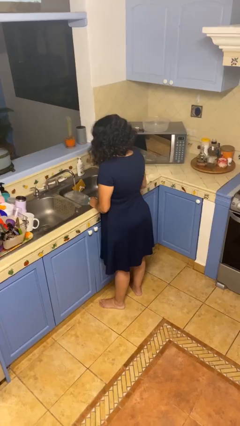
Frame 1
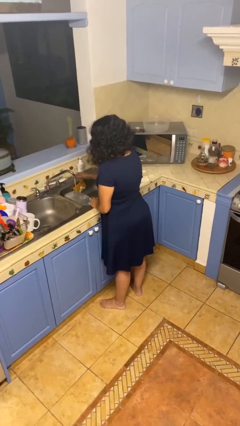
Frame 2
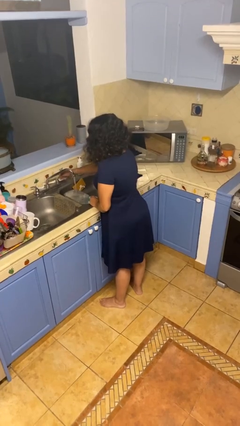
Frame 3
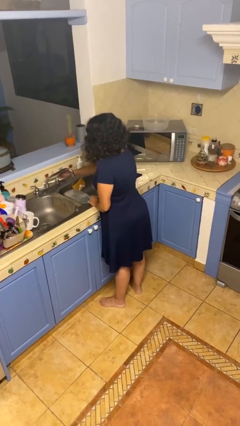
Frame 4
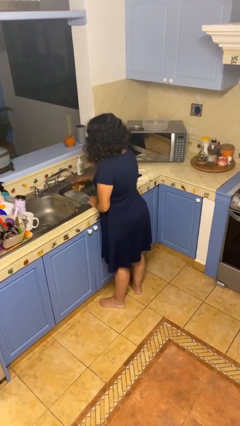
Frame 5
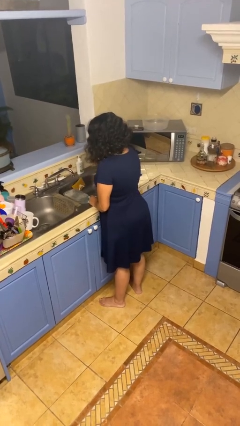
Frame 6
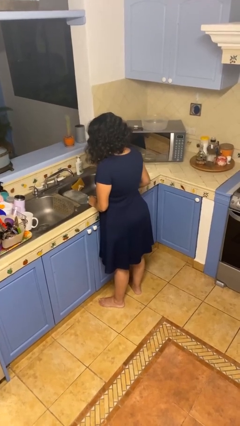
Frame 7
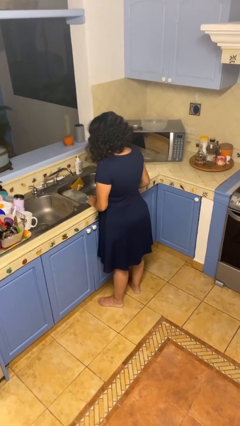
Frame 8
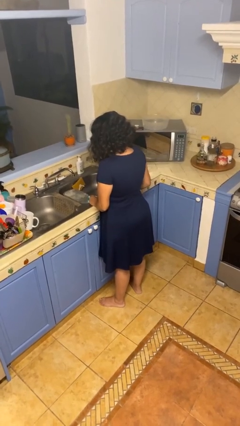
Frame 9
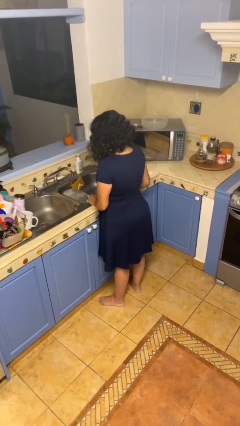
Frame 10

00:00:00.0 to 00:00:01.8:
person turns off faucet

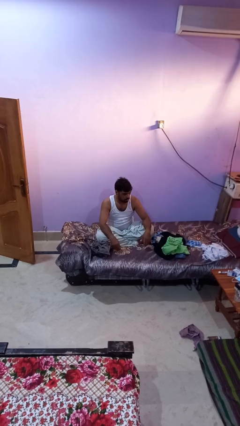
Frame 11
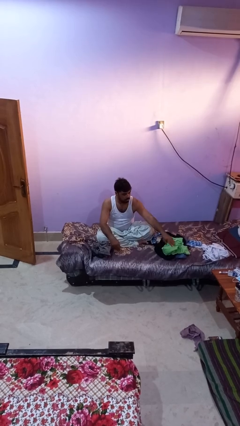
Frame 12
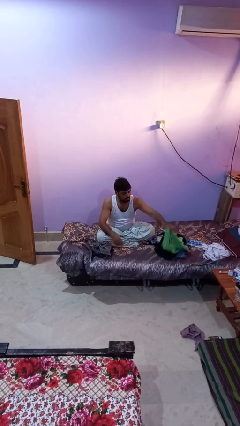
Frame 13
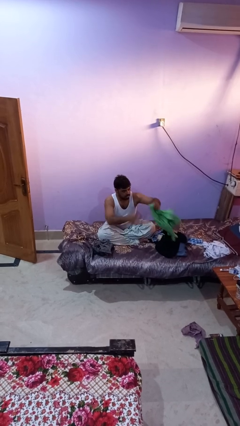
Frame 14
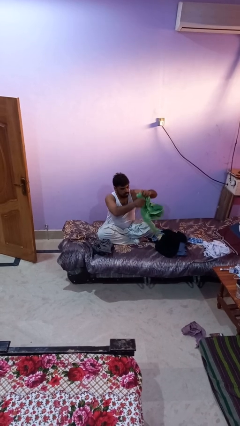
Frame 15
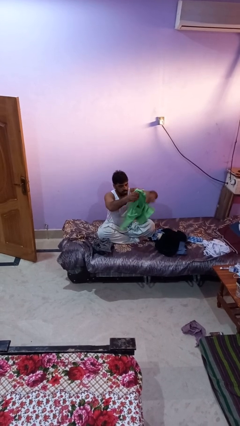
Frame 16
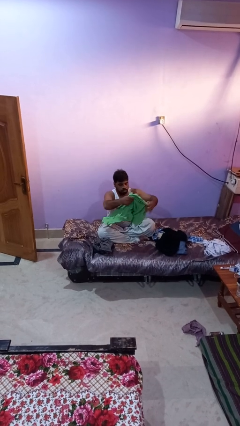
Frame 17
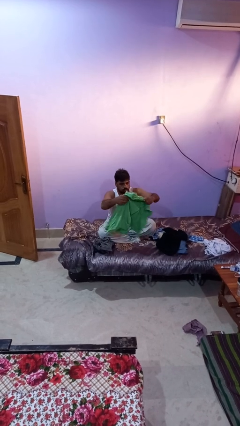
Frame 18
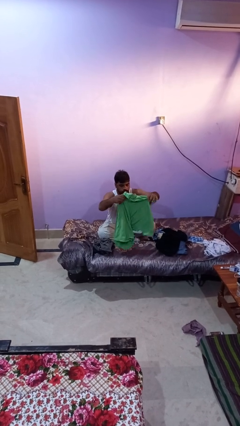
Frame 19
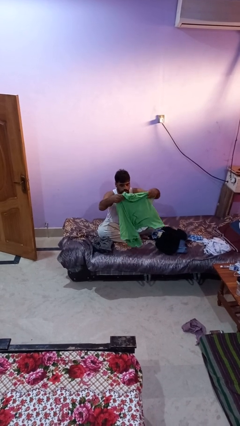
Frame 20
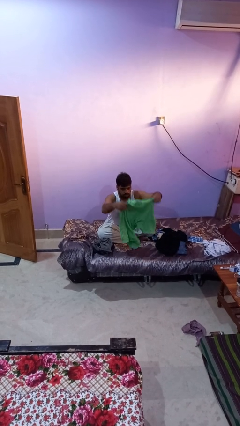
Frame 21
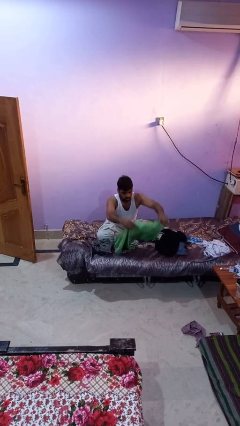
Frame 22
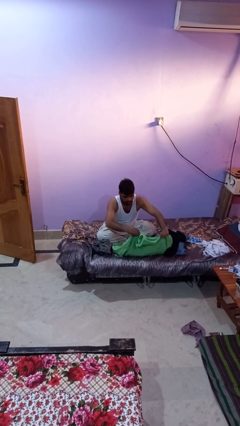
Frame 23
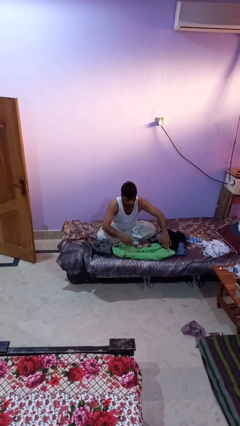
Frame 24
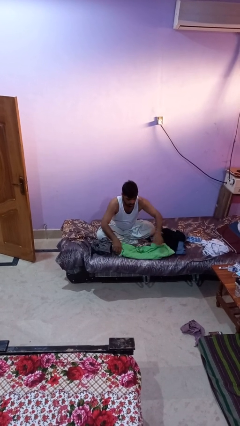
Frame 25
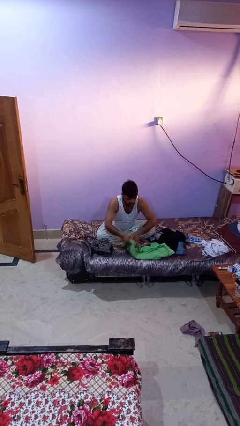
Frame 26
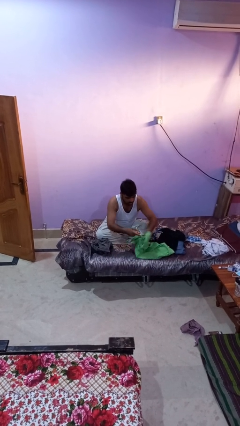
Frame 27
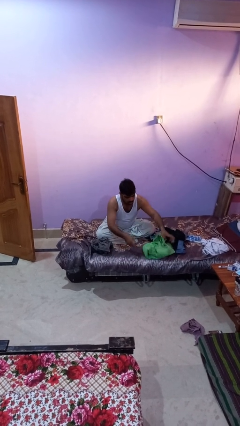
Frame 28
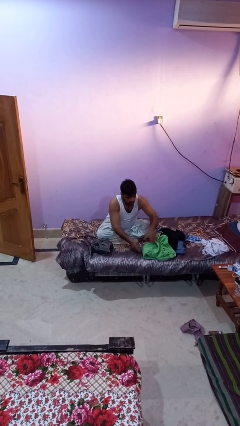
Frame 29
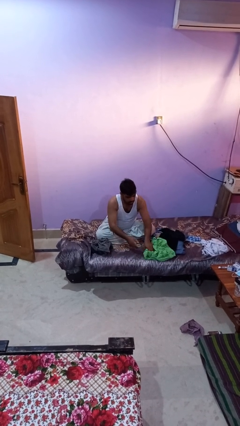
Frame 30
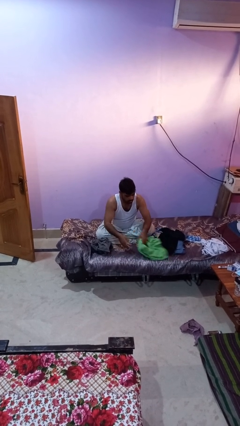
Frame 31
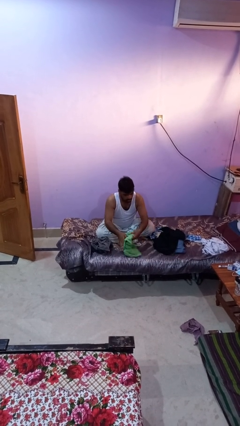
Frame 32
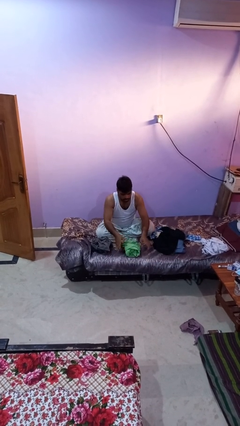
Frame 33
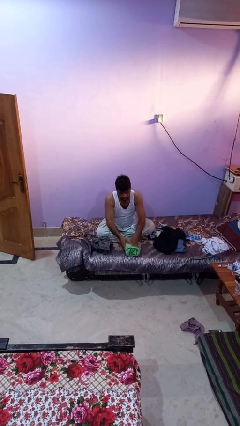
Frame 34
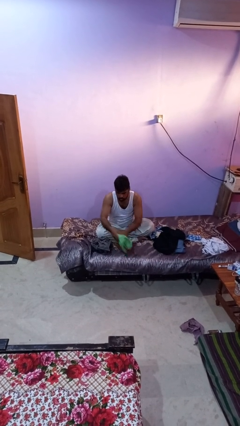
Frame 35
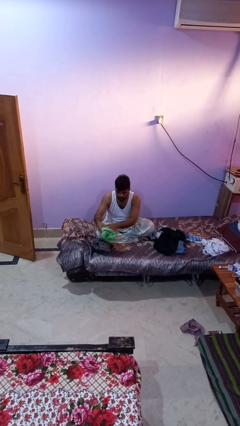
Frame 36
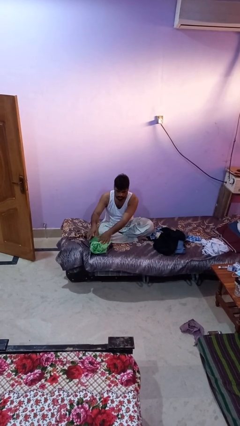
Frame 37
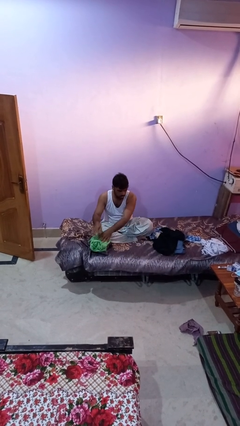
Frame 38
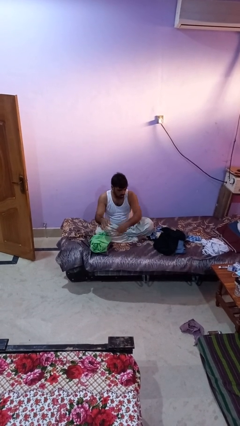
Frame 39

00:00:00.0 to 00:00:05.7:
person folds shirt

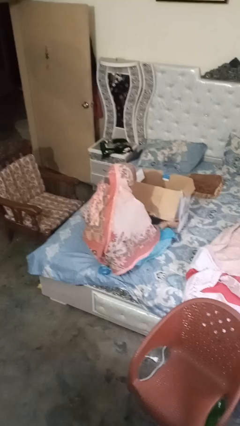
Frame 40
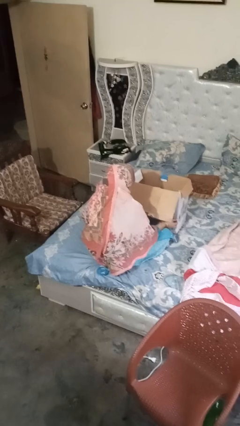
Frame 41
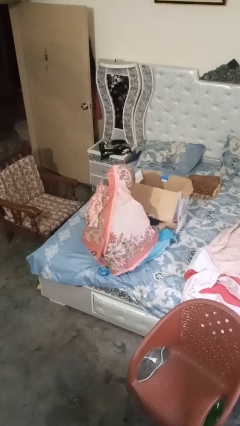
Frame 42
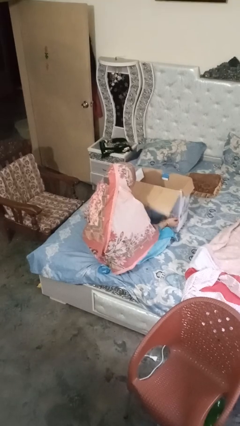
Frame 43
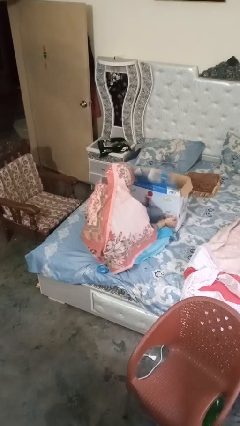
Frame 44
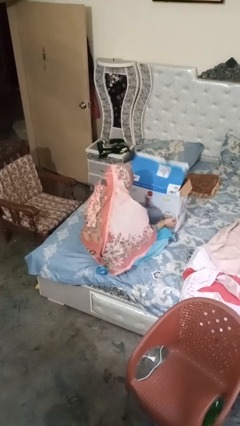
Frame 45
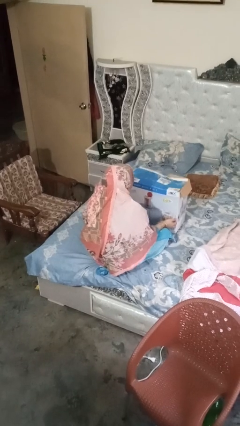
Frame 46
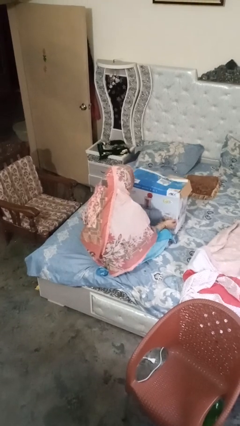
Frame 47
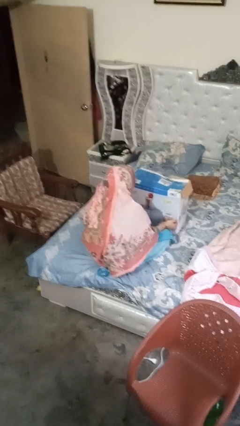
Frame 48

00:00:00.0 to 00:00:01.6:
person closes box

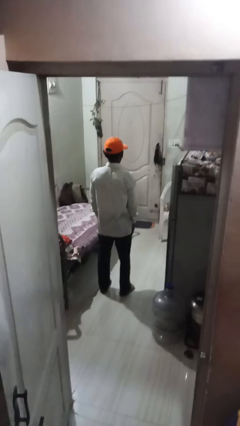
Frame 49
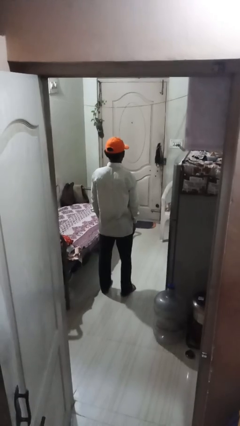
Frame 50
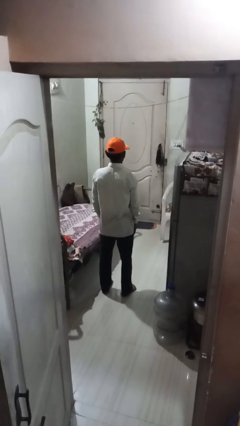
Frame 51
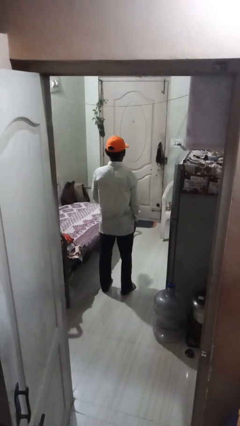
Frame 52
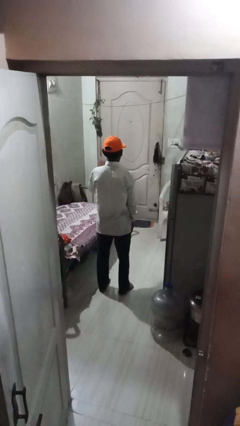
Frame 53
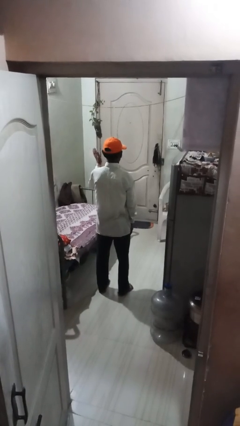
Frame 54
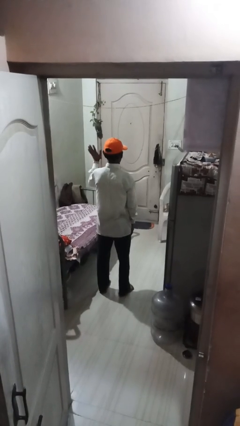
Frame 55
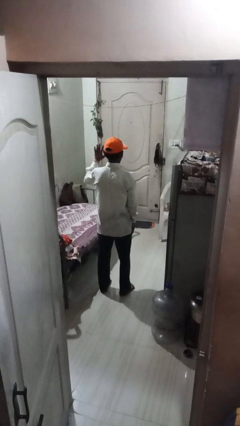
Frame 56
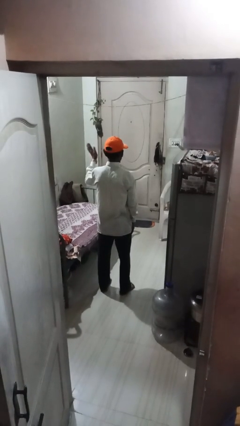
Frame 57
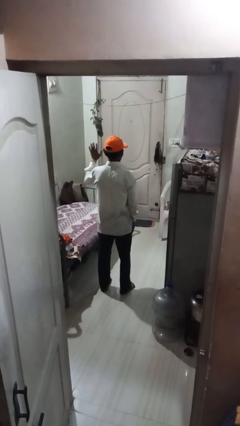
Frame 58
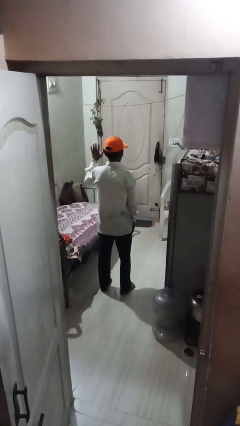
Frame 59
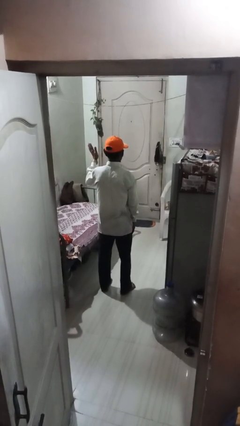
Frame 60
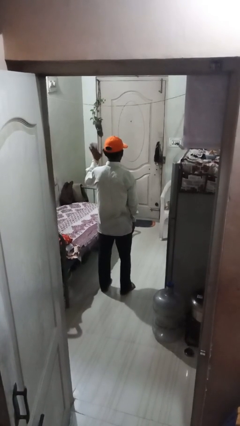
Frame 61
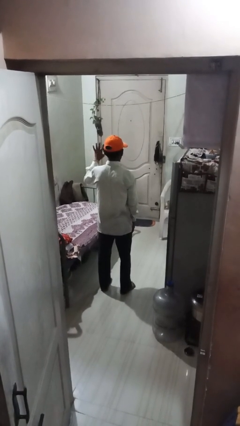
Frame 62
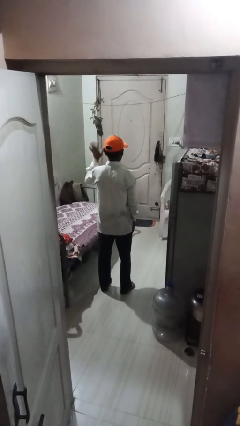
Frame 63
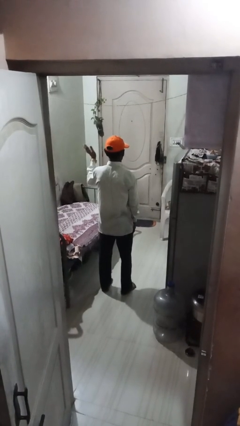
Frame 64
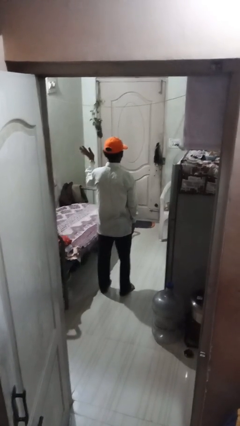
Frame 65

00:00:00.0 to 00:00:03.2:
person waves at person

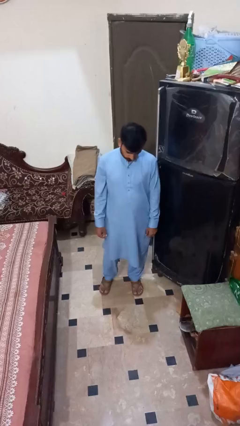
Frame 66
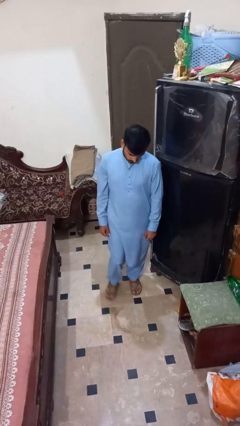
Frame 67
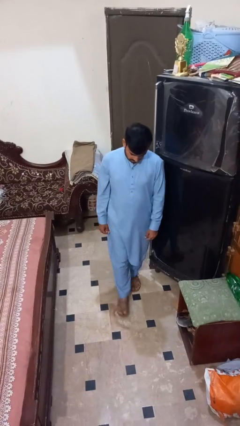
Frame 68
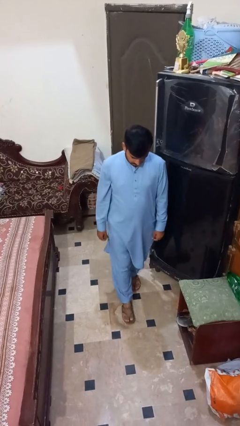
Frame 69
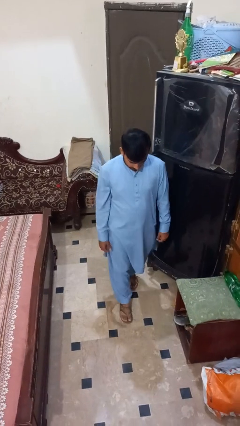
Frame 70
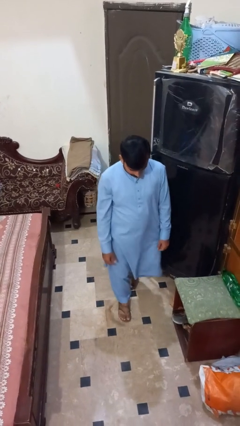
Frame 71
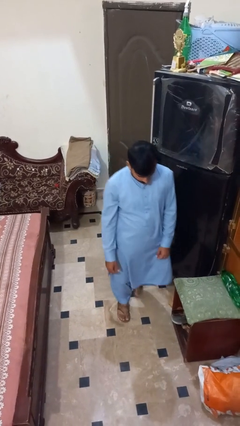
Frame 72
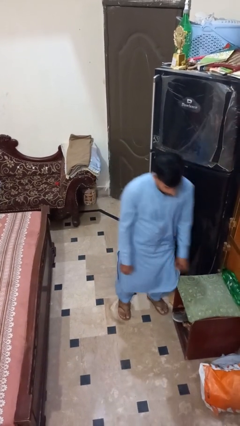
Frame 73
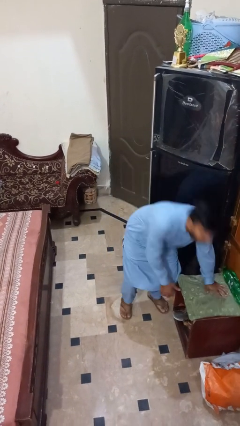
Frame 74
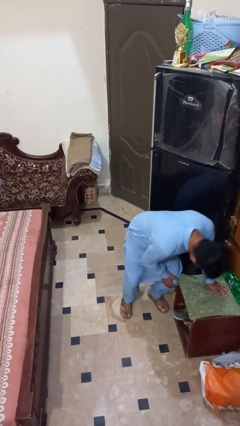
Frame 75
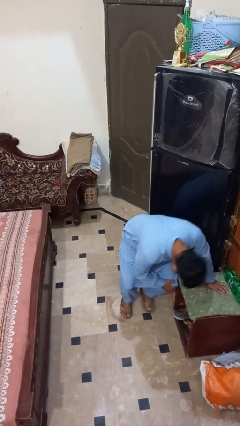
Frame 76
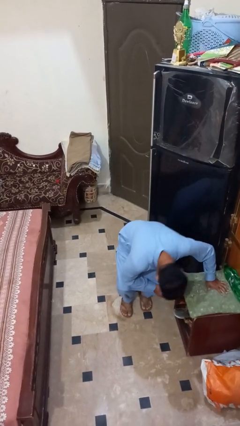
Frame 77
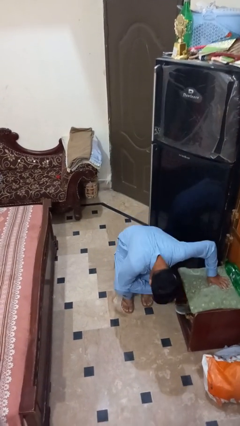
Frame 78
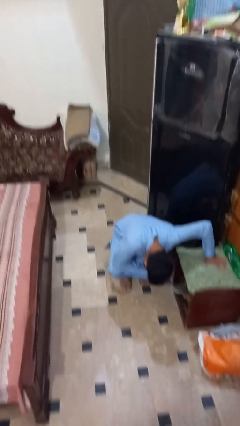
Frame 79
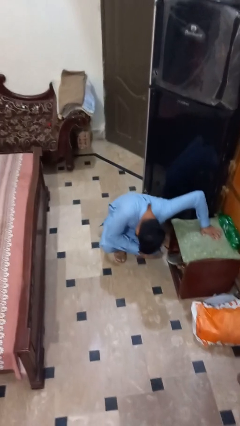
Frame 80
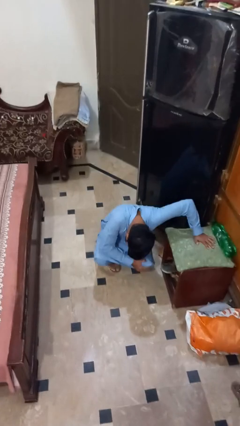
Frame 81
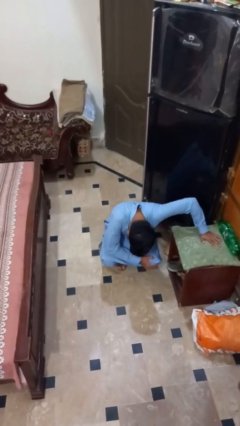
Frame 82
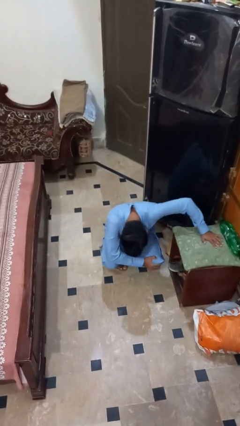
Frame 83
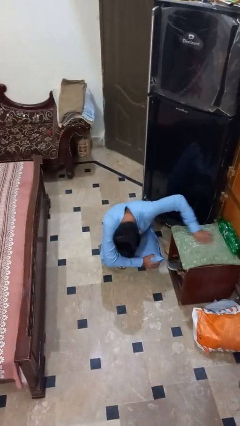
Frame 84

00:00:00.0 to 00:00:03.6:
person trips on object on floor

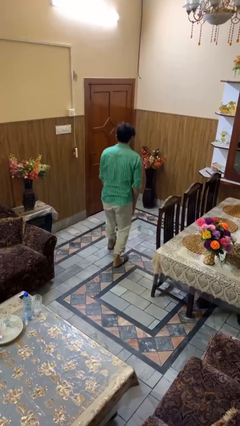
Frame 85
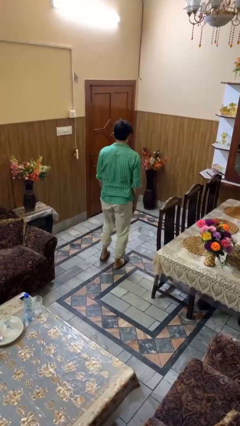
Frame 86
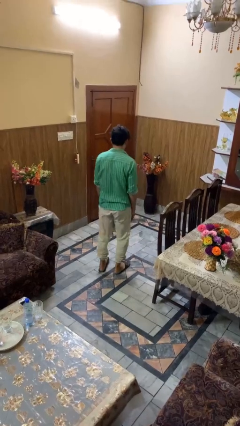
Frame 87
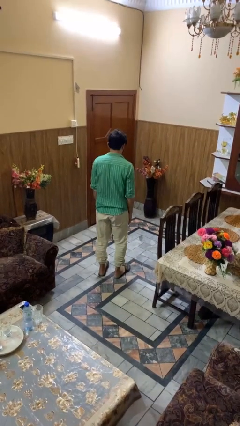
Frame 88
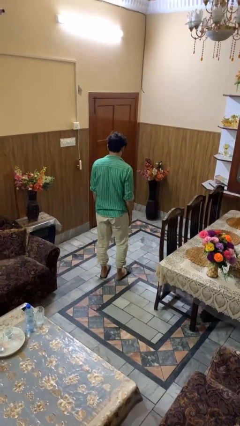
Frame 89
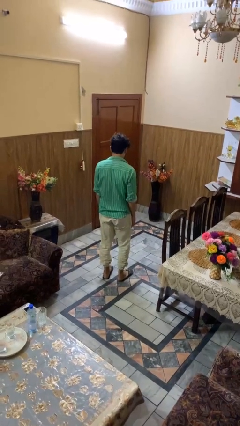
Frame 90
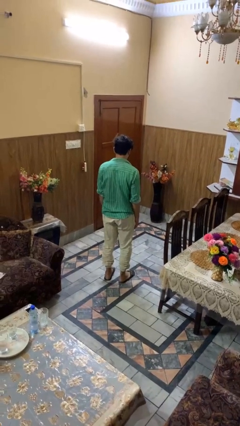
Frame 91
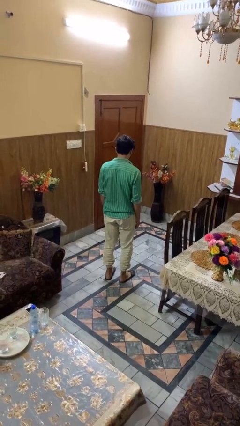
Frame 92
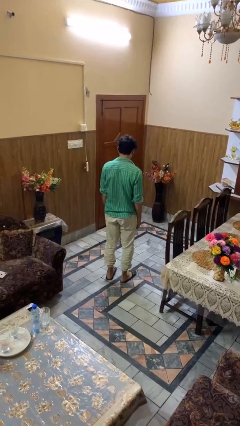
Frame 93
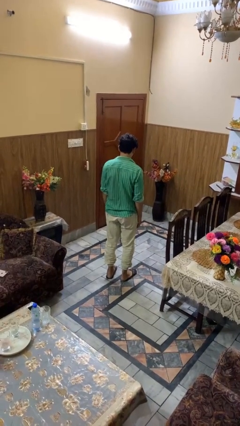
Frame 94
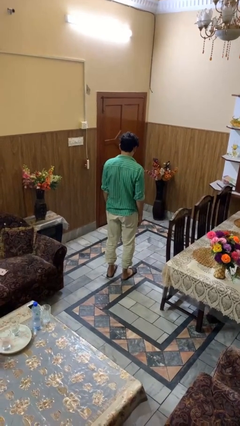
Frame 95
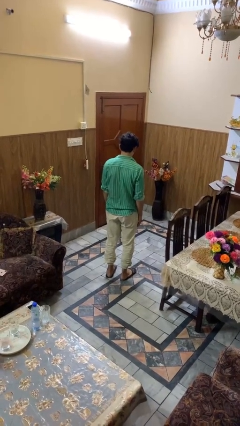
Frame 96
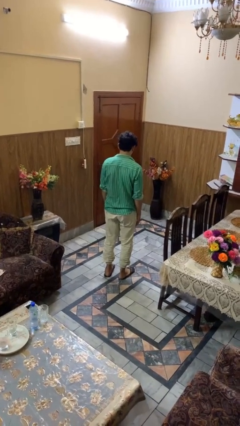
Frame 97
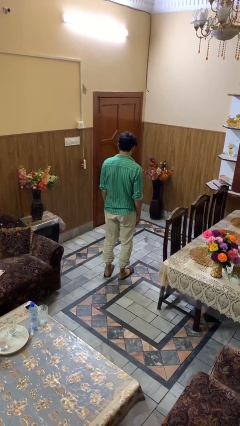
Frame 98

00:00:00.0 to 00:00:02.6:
person stands up from floor
